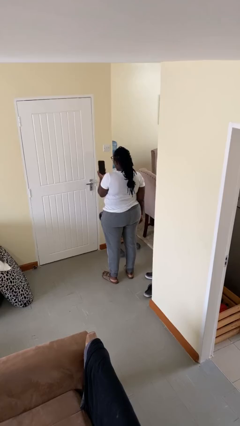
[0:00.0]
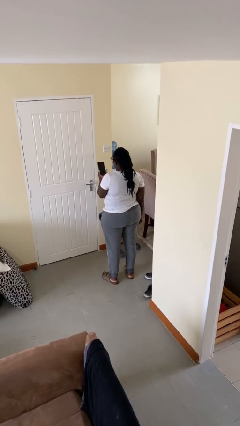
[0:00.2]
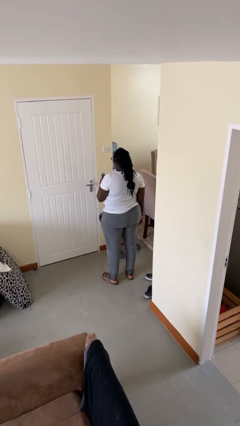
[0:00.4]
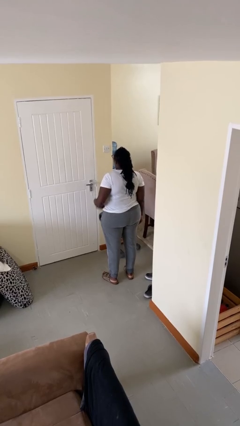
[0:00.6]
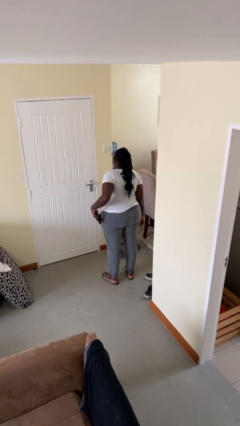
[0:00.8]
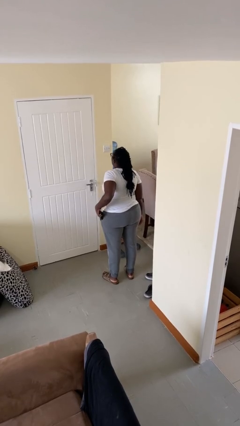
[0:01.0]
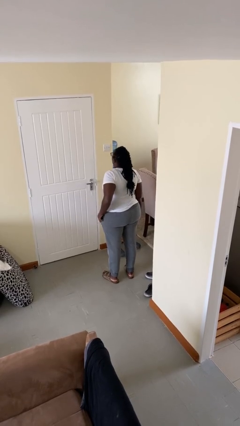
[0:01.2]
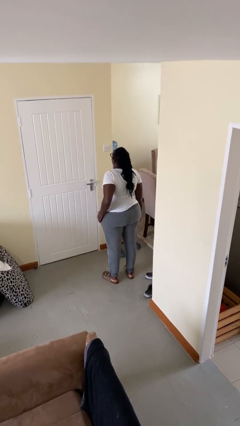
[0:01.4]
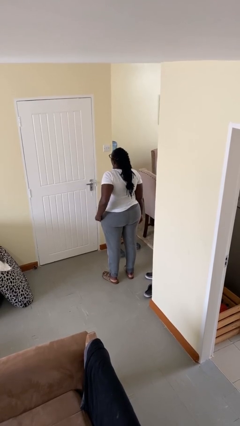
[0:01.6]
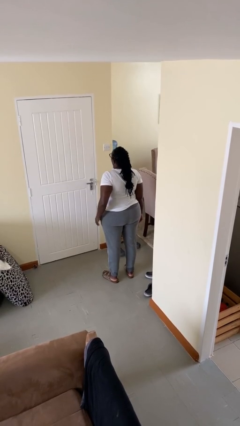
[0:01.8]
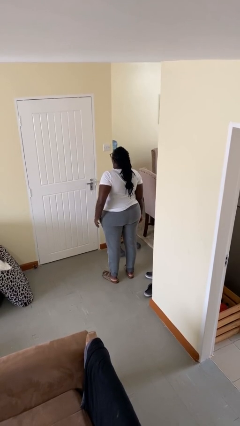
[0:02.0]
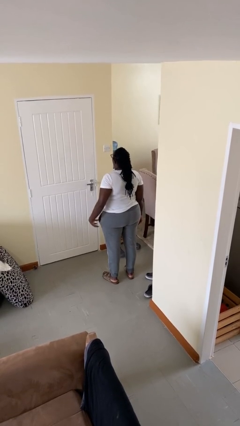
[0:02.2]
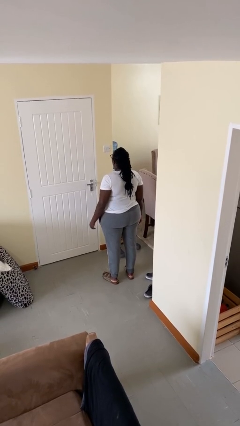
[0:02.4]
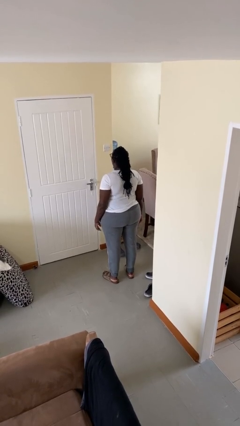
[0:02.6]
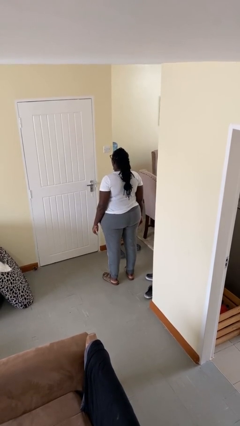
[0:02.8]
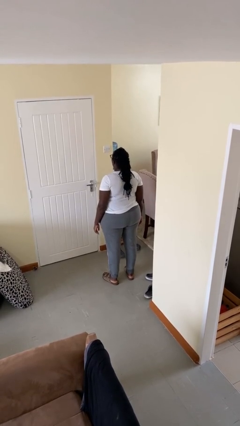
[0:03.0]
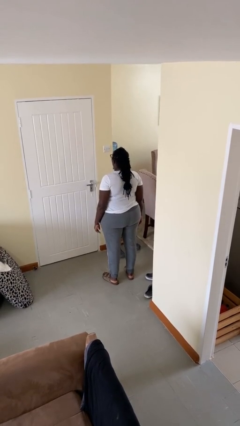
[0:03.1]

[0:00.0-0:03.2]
person puts phone into pocket

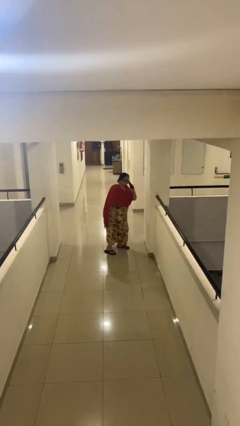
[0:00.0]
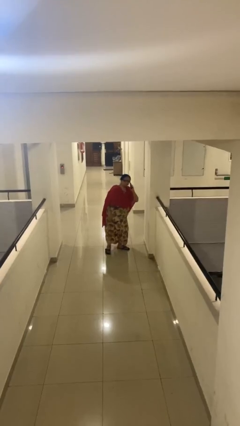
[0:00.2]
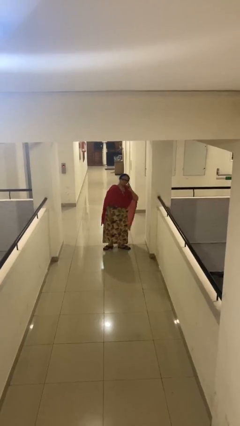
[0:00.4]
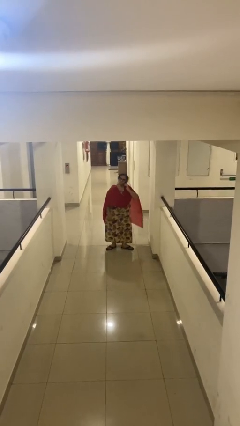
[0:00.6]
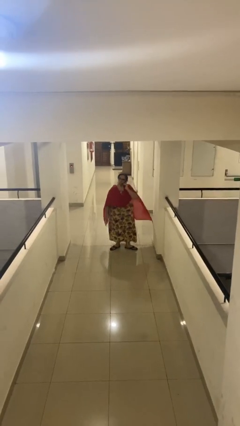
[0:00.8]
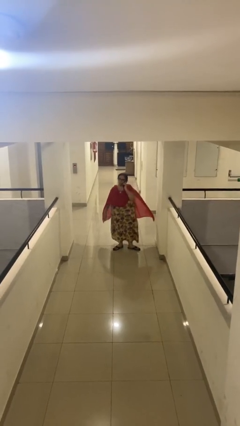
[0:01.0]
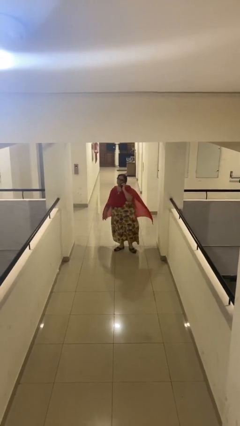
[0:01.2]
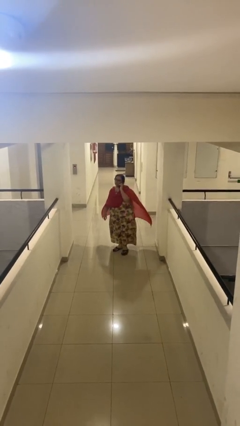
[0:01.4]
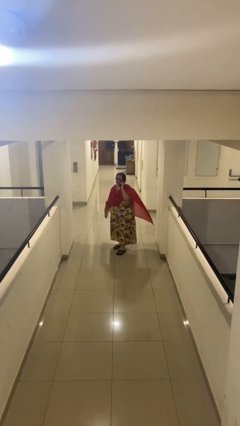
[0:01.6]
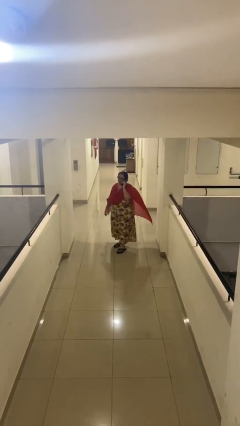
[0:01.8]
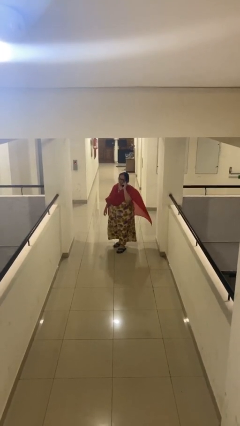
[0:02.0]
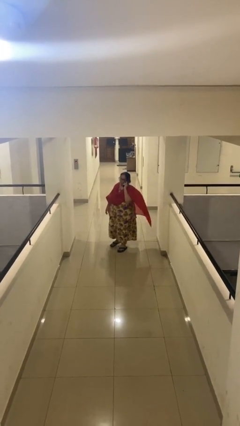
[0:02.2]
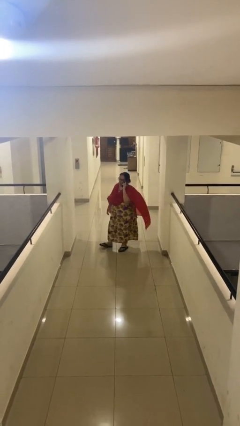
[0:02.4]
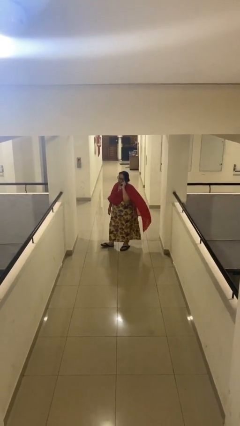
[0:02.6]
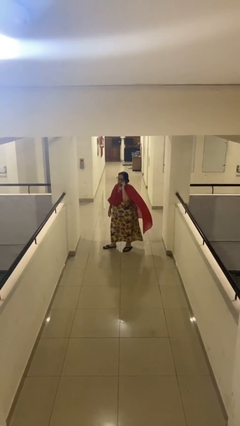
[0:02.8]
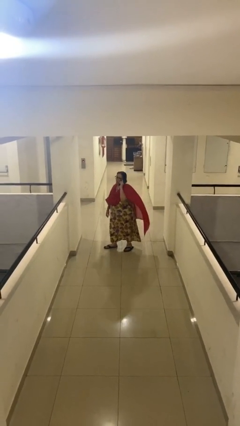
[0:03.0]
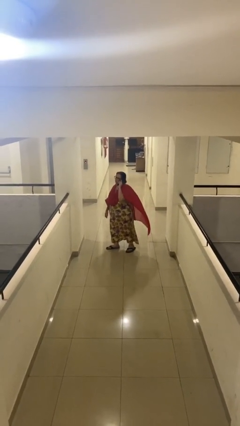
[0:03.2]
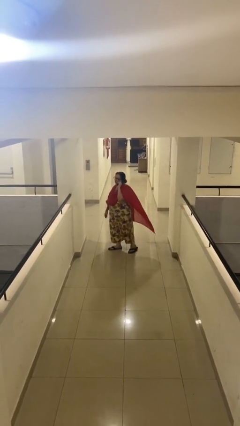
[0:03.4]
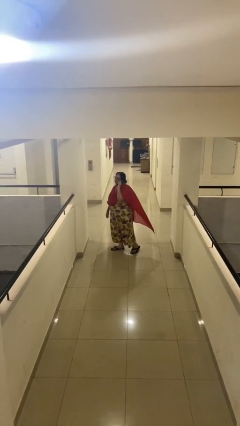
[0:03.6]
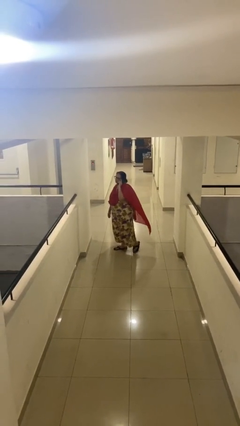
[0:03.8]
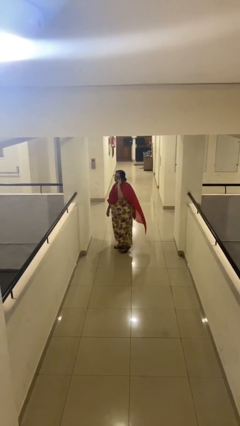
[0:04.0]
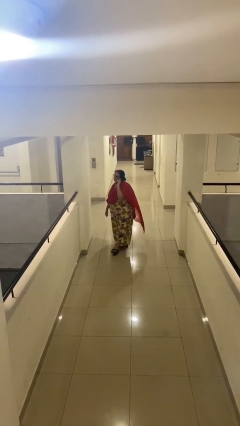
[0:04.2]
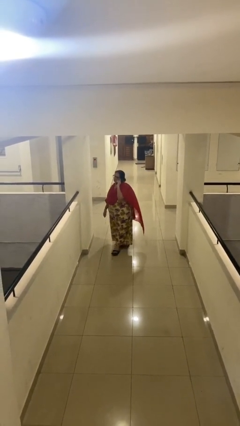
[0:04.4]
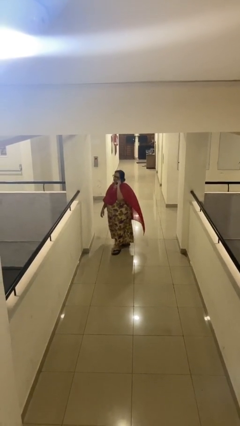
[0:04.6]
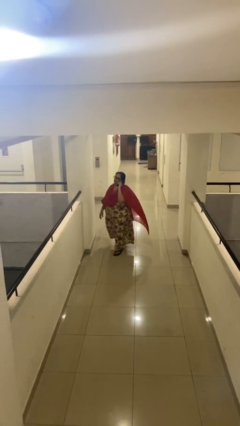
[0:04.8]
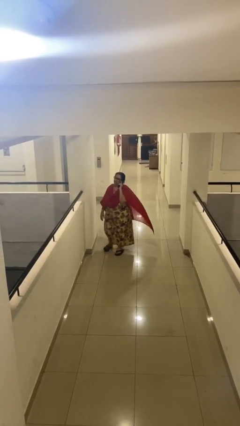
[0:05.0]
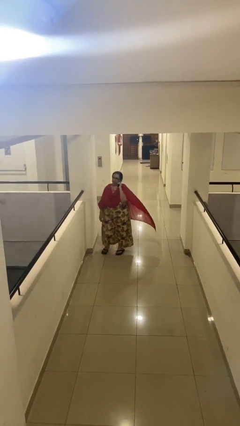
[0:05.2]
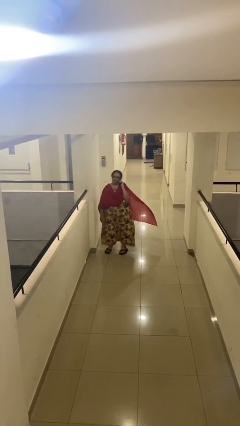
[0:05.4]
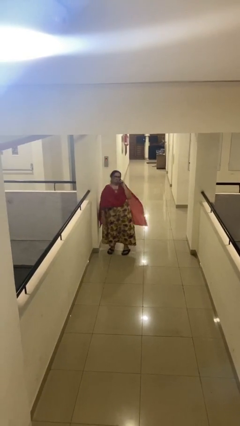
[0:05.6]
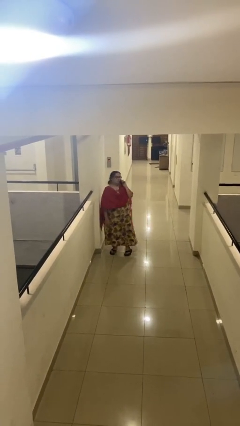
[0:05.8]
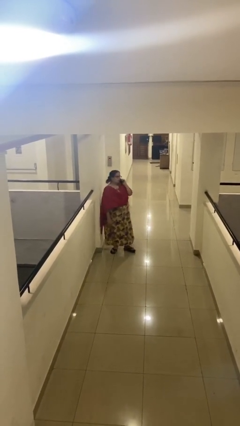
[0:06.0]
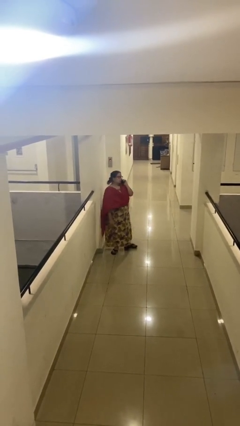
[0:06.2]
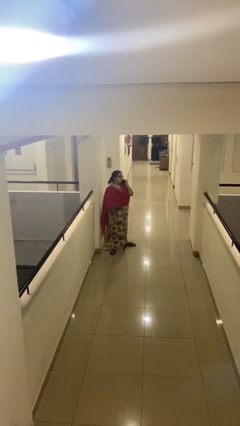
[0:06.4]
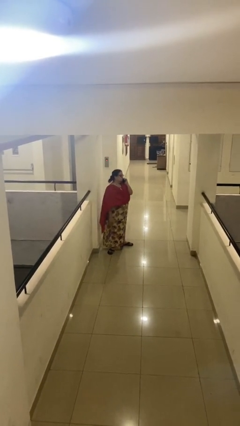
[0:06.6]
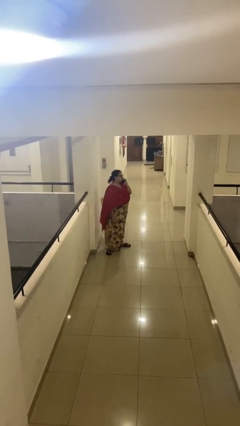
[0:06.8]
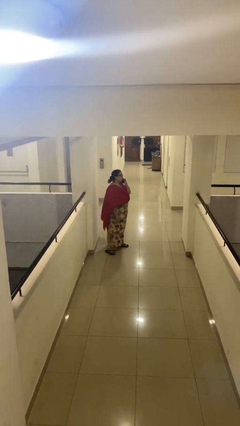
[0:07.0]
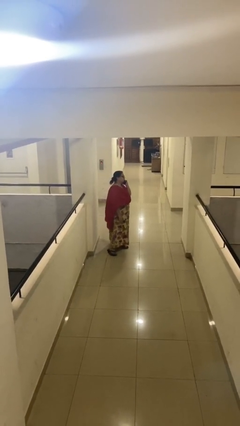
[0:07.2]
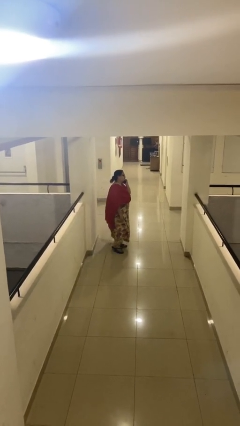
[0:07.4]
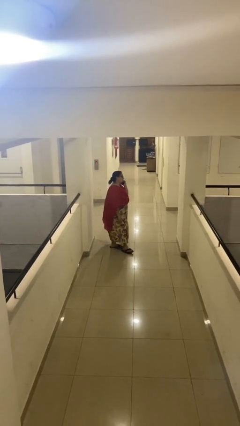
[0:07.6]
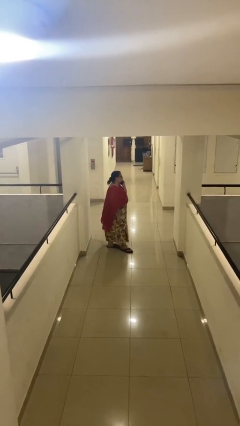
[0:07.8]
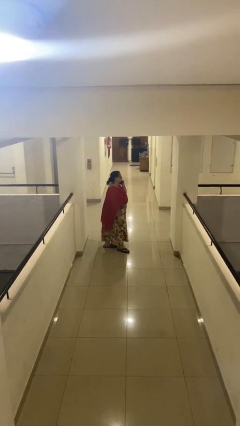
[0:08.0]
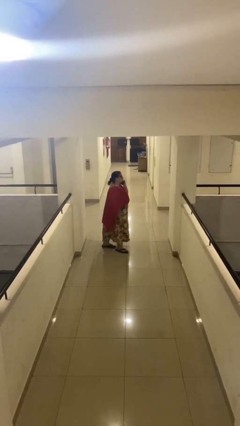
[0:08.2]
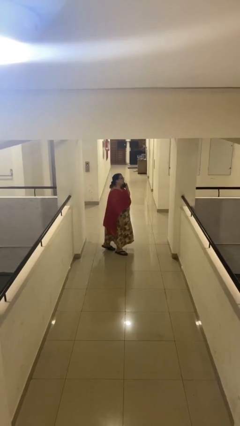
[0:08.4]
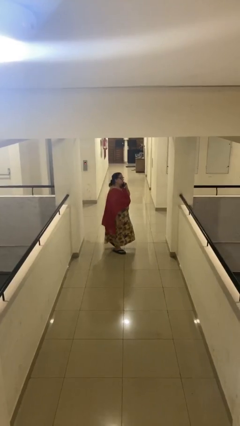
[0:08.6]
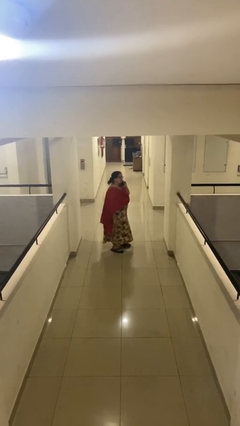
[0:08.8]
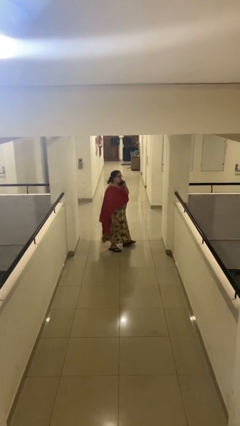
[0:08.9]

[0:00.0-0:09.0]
person talks on phone

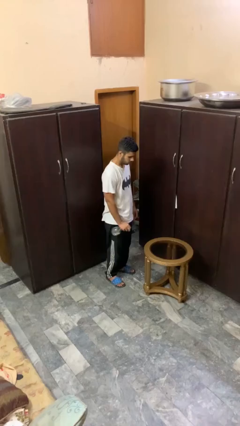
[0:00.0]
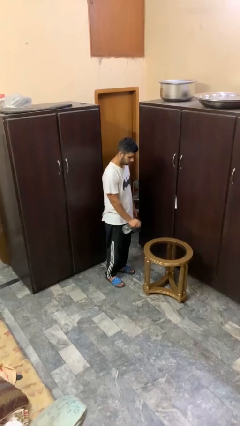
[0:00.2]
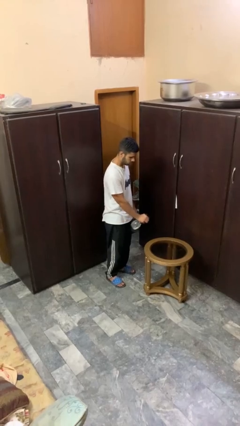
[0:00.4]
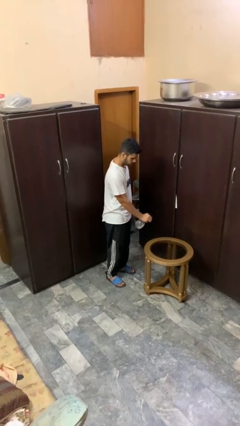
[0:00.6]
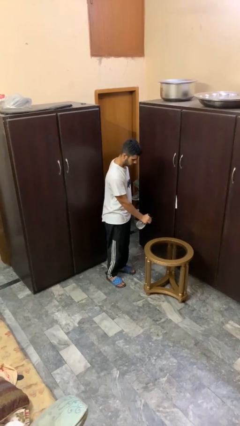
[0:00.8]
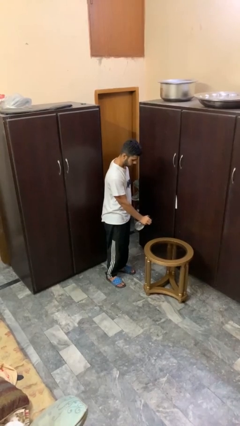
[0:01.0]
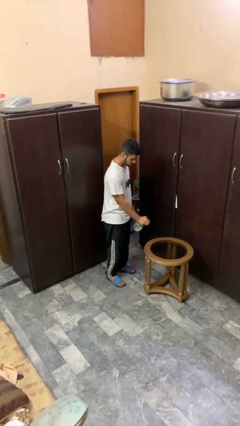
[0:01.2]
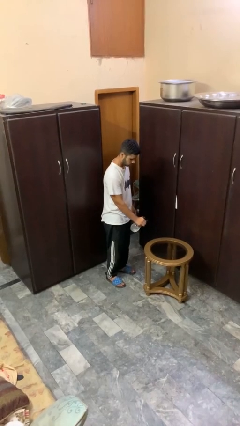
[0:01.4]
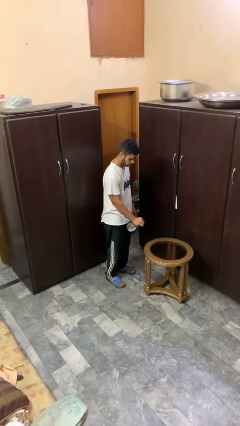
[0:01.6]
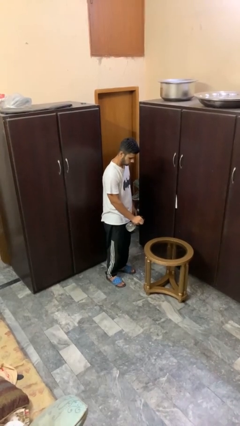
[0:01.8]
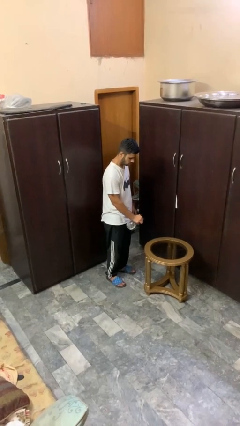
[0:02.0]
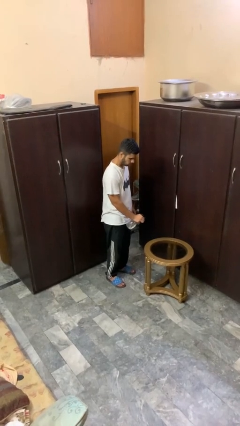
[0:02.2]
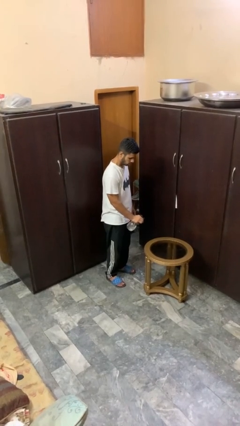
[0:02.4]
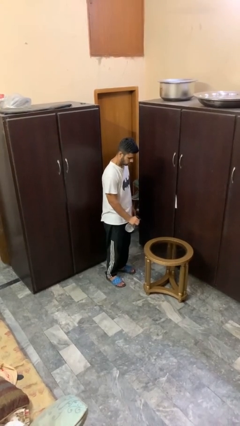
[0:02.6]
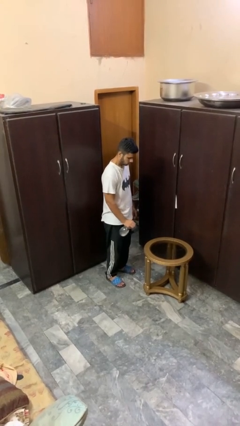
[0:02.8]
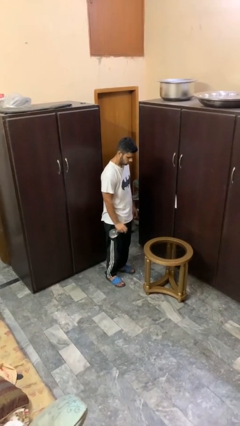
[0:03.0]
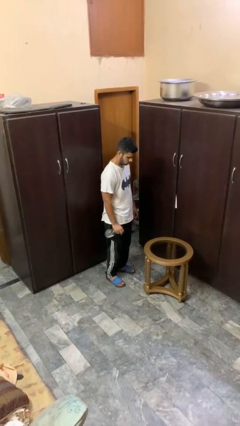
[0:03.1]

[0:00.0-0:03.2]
person sprays from bottle

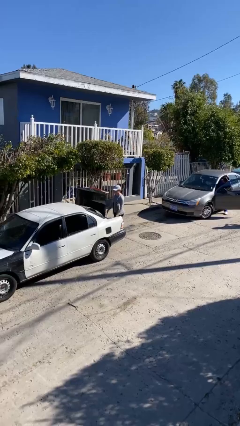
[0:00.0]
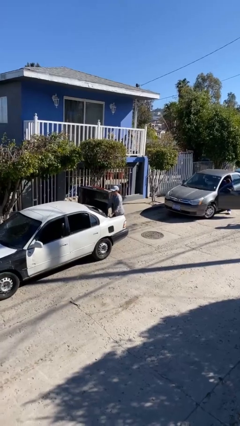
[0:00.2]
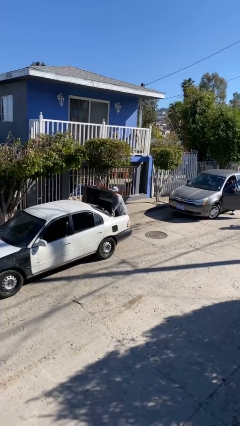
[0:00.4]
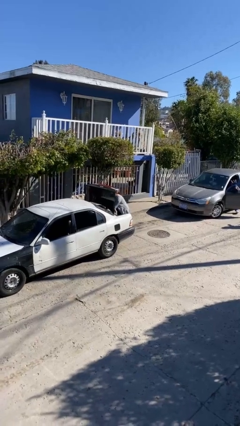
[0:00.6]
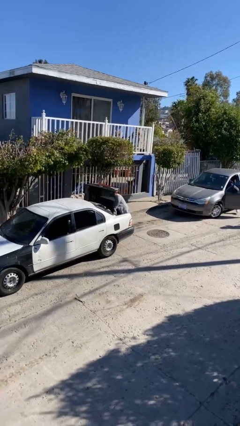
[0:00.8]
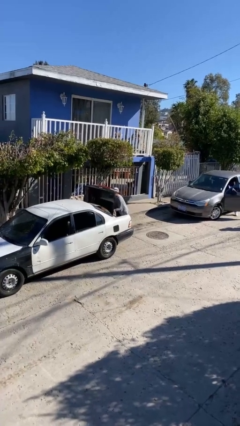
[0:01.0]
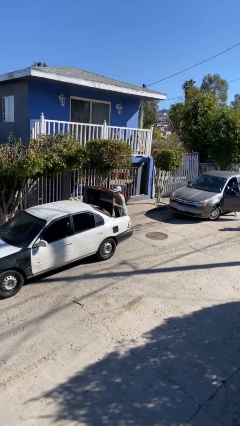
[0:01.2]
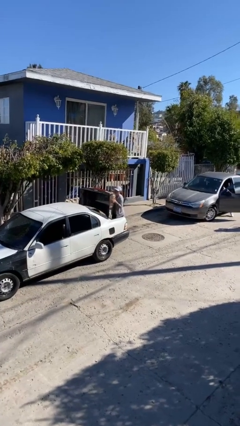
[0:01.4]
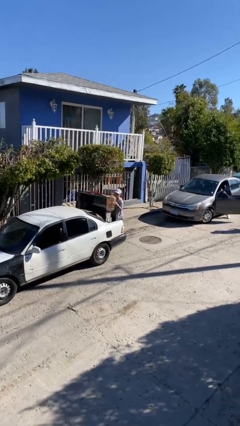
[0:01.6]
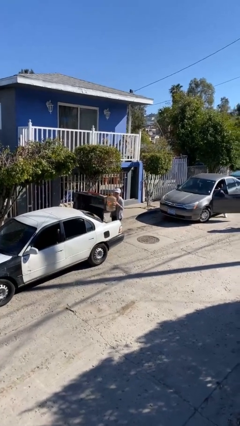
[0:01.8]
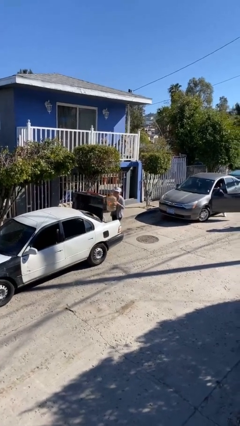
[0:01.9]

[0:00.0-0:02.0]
person unloads car

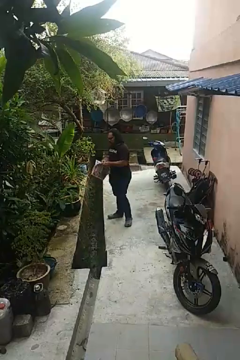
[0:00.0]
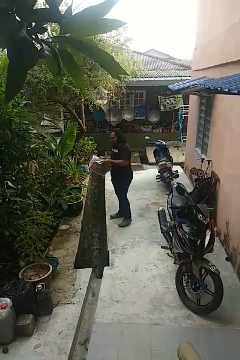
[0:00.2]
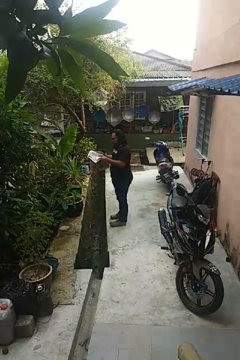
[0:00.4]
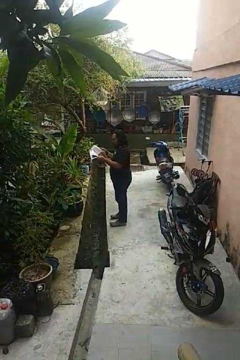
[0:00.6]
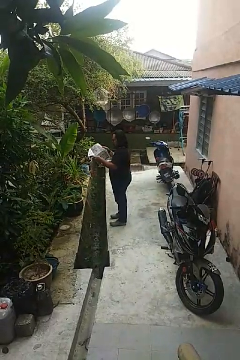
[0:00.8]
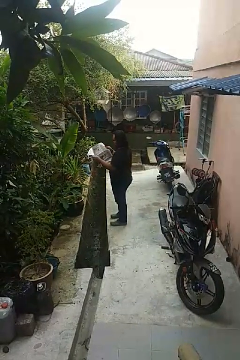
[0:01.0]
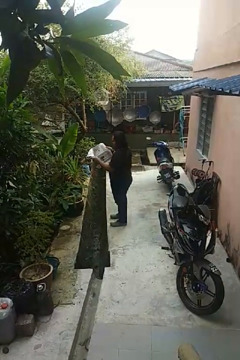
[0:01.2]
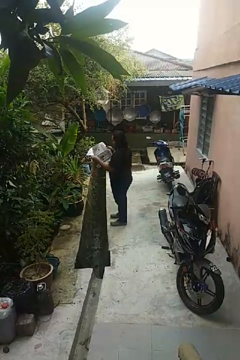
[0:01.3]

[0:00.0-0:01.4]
person reads newspaper
